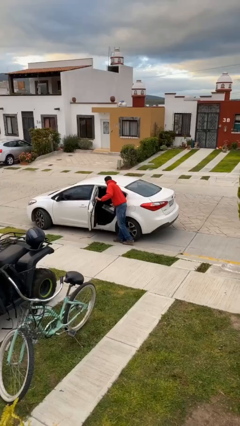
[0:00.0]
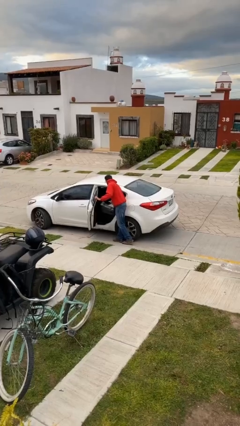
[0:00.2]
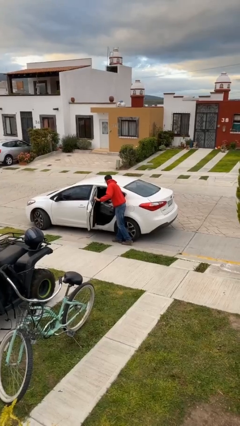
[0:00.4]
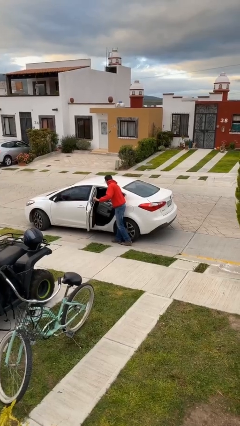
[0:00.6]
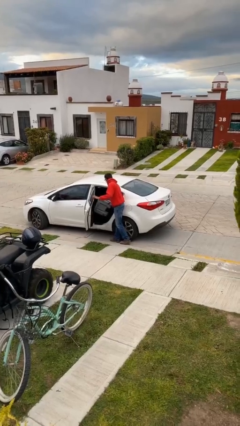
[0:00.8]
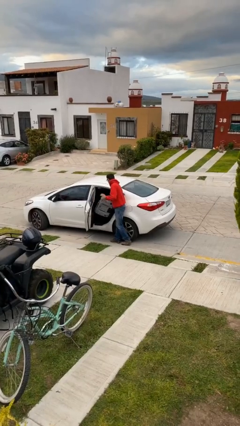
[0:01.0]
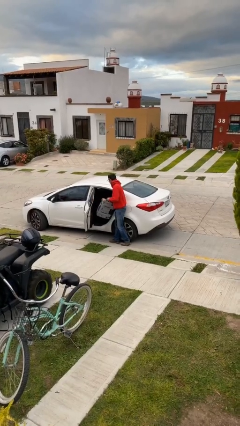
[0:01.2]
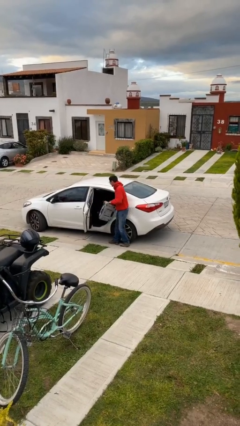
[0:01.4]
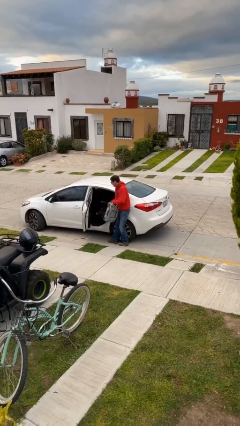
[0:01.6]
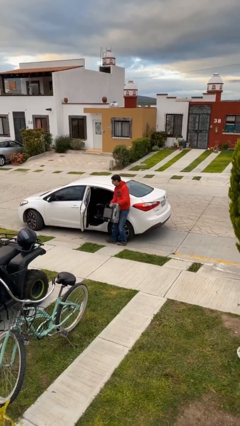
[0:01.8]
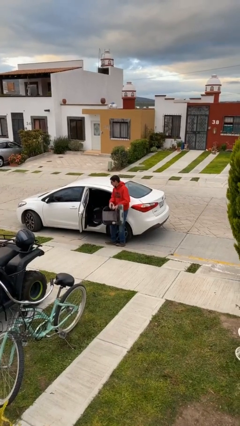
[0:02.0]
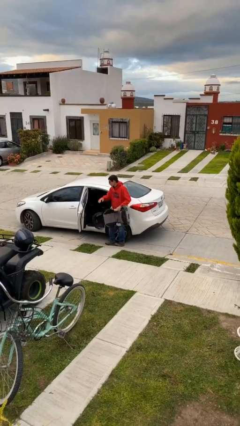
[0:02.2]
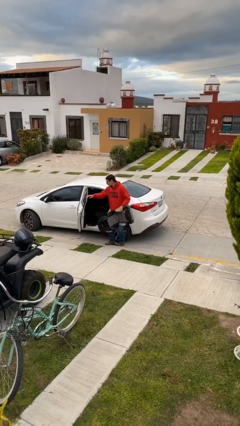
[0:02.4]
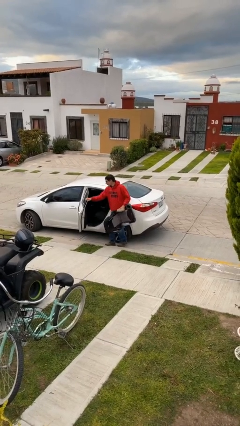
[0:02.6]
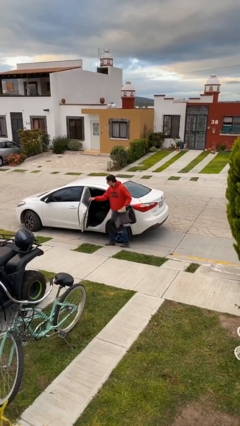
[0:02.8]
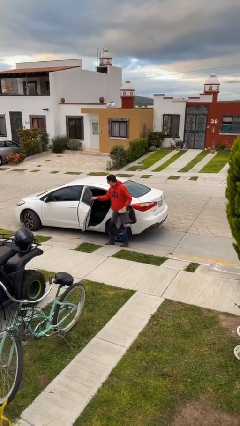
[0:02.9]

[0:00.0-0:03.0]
person unloads car

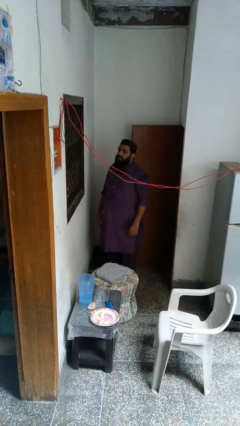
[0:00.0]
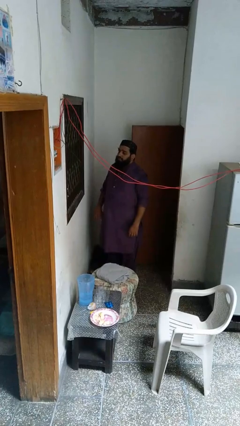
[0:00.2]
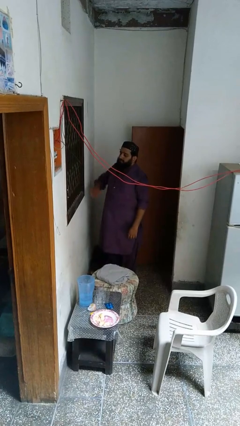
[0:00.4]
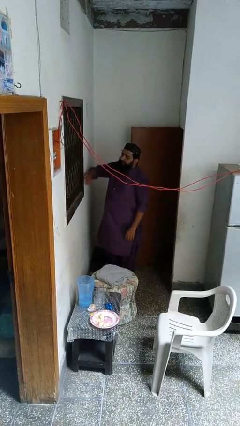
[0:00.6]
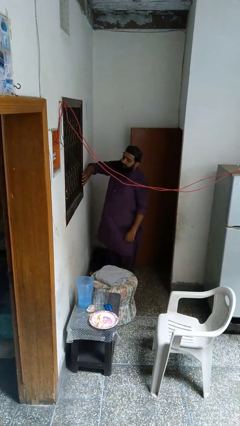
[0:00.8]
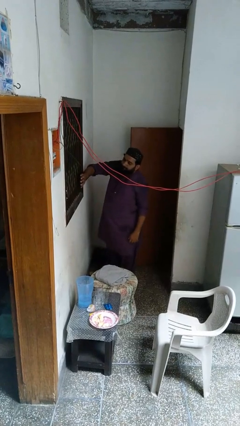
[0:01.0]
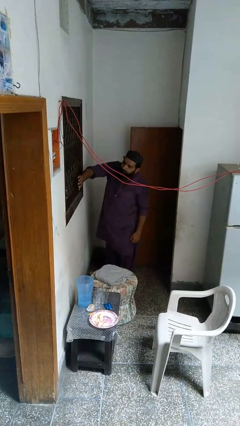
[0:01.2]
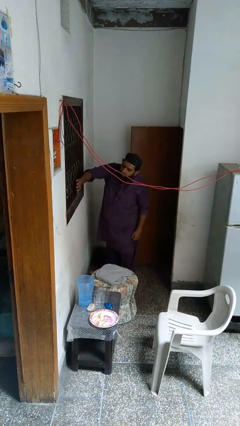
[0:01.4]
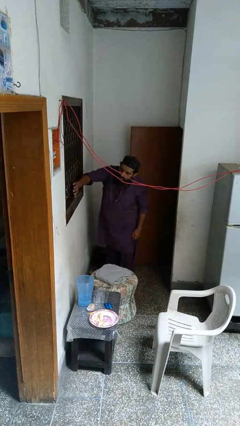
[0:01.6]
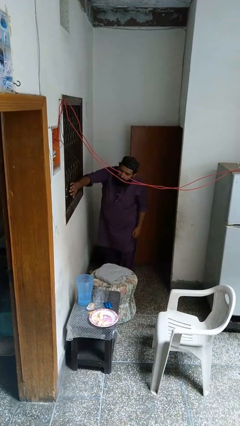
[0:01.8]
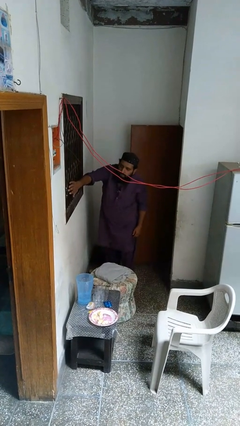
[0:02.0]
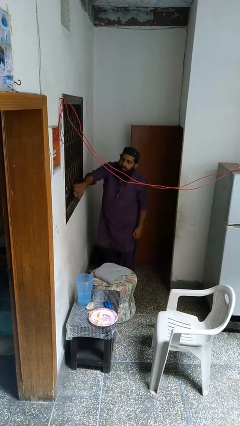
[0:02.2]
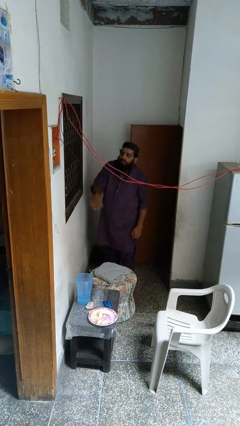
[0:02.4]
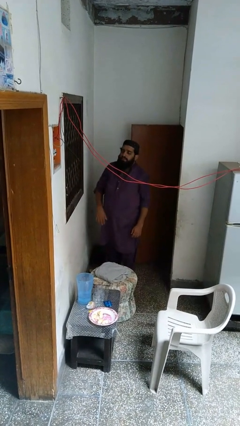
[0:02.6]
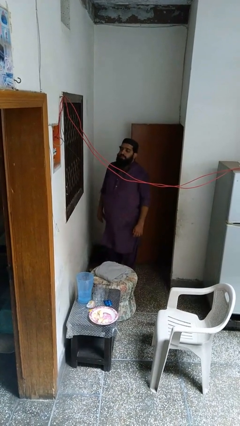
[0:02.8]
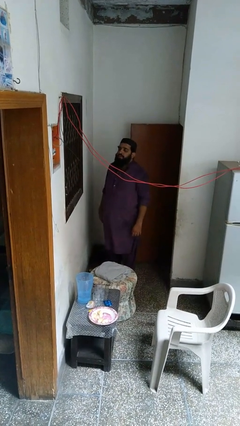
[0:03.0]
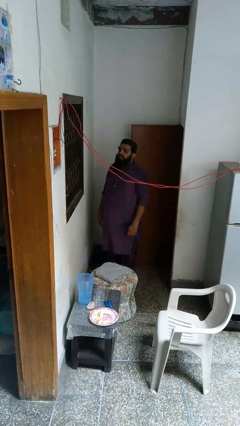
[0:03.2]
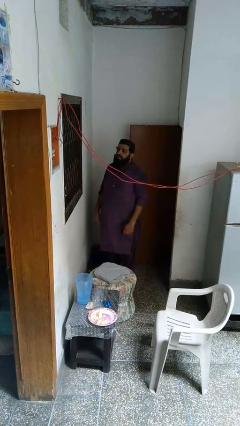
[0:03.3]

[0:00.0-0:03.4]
person opens home window

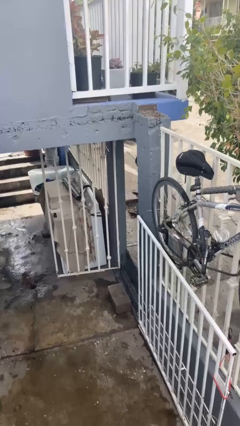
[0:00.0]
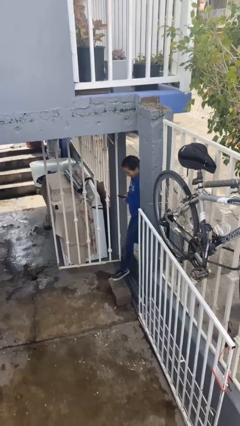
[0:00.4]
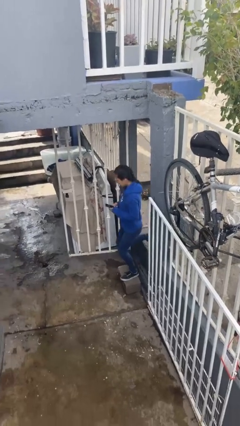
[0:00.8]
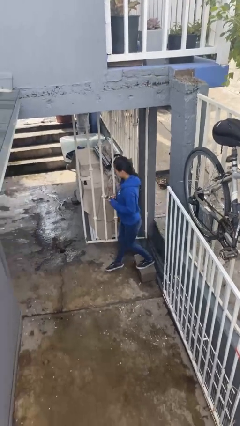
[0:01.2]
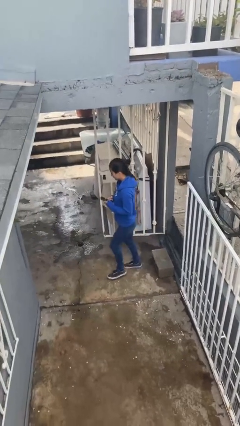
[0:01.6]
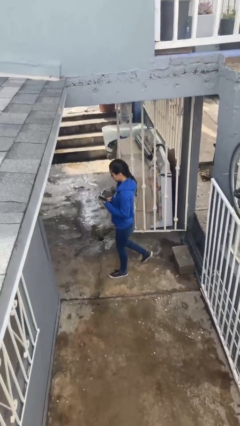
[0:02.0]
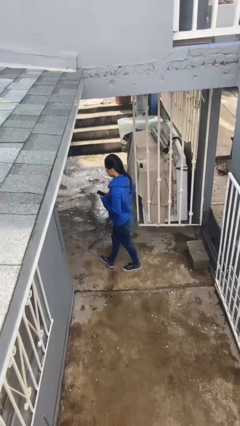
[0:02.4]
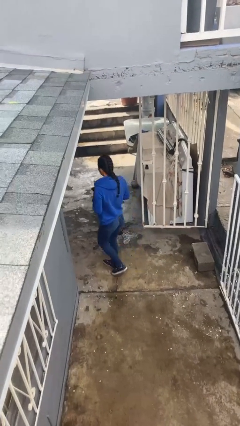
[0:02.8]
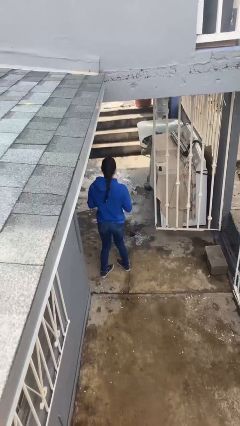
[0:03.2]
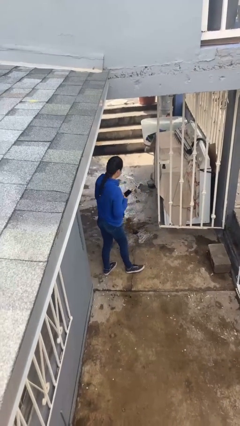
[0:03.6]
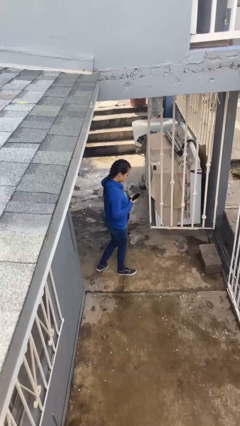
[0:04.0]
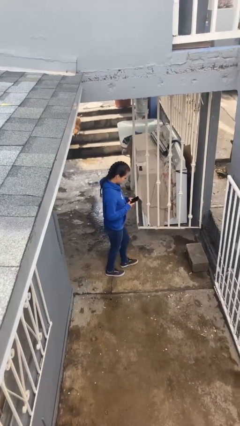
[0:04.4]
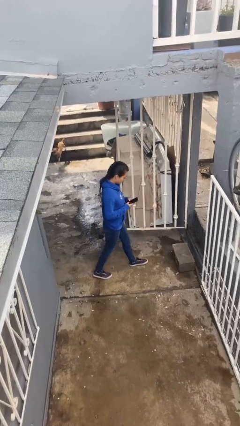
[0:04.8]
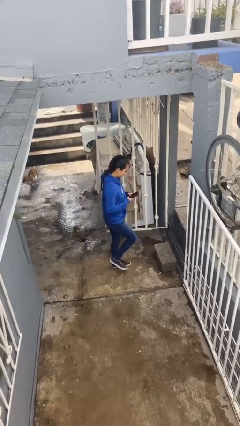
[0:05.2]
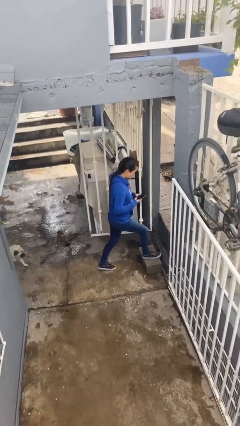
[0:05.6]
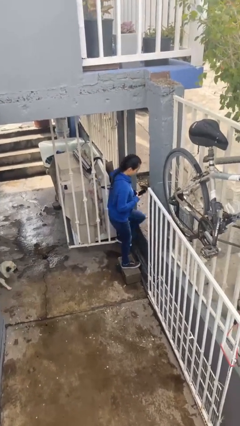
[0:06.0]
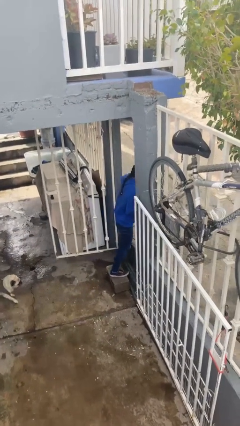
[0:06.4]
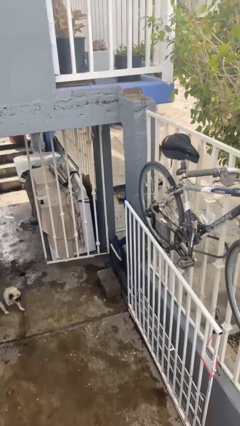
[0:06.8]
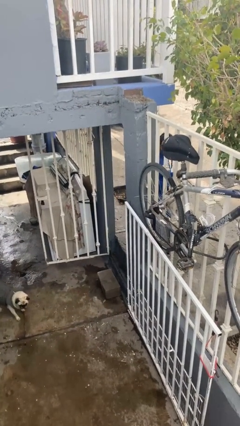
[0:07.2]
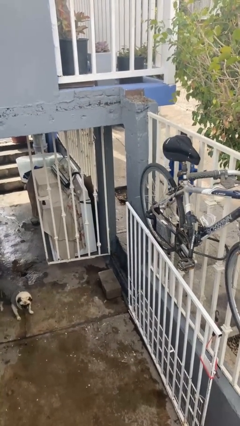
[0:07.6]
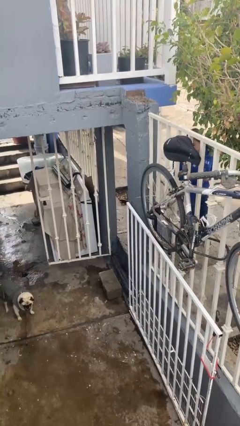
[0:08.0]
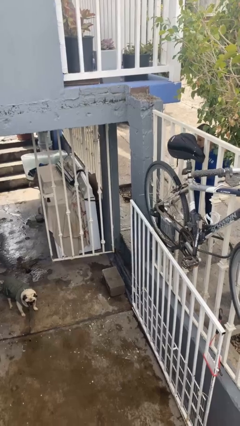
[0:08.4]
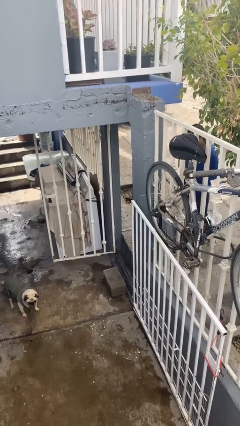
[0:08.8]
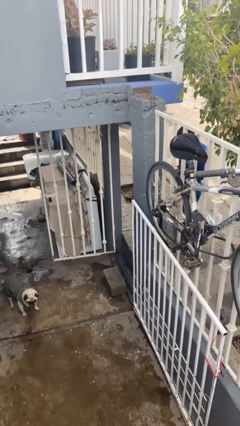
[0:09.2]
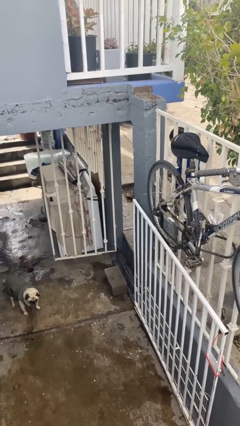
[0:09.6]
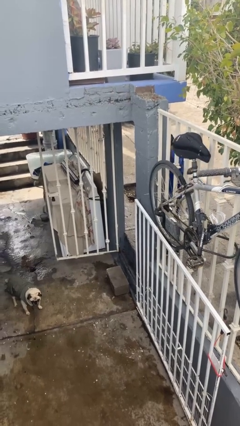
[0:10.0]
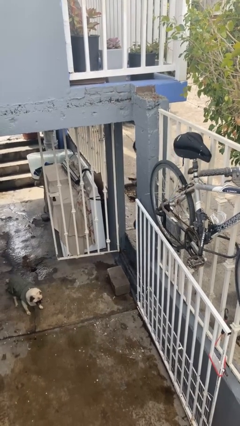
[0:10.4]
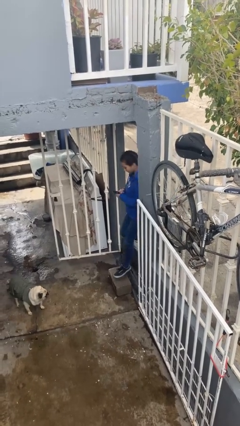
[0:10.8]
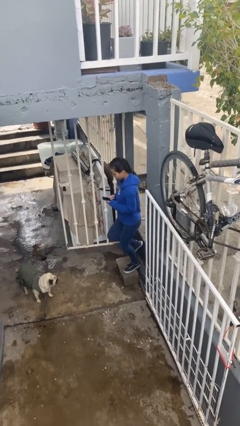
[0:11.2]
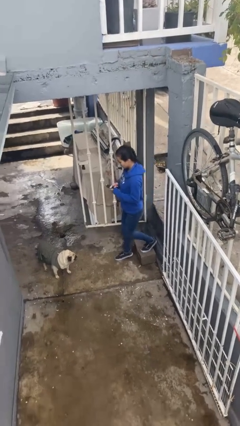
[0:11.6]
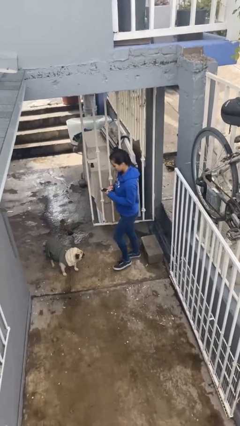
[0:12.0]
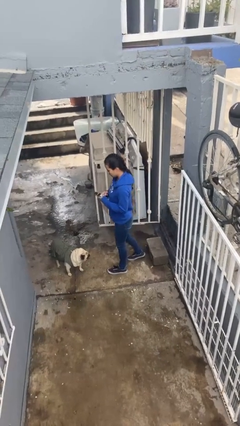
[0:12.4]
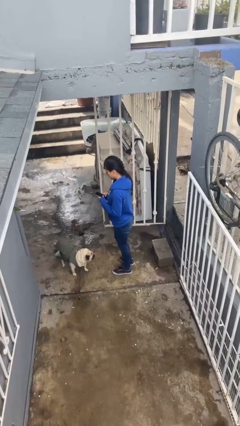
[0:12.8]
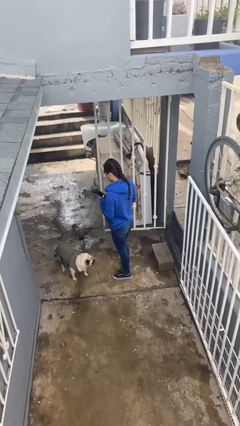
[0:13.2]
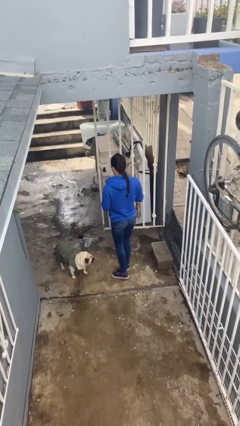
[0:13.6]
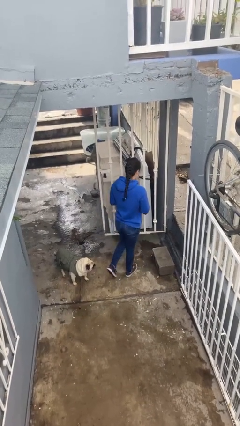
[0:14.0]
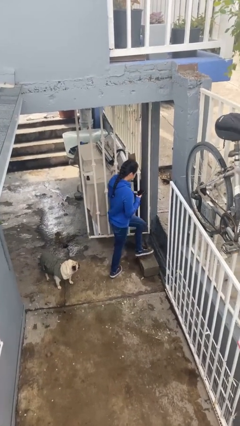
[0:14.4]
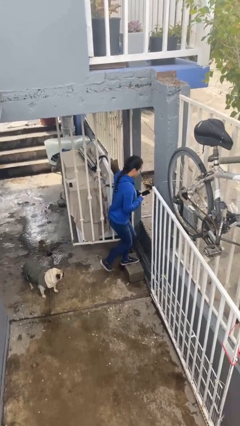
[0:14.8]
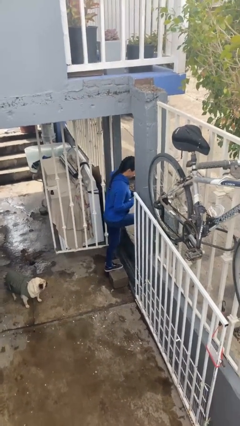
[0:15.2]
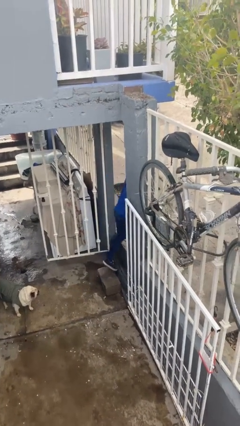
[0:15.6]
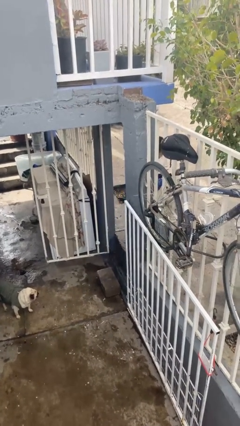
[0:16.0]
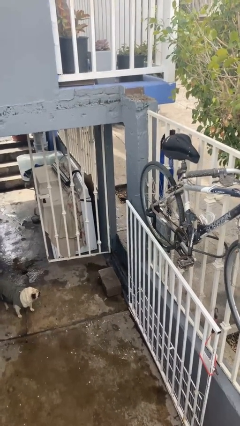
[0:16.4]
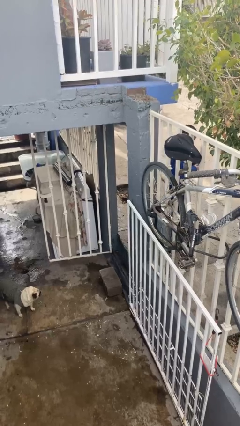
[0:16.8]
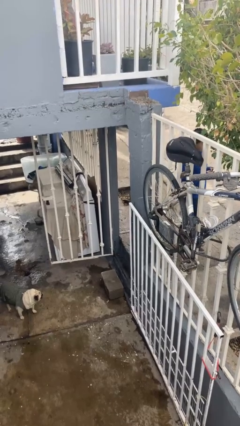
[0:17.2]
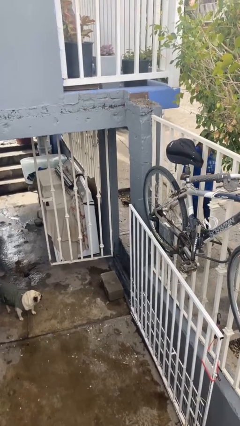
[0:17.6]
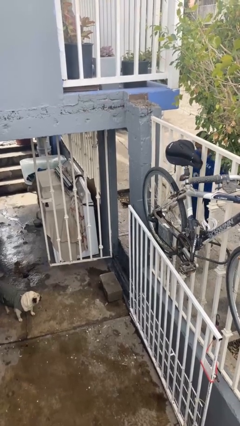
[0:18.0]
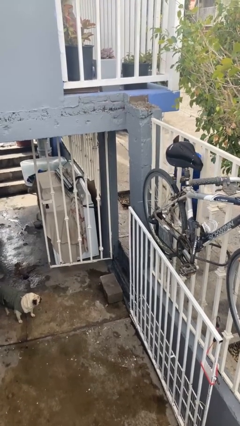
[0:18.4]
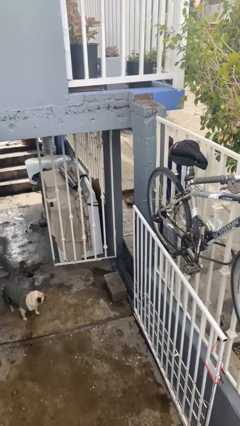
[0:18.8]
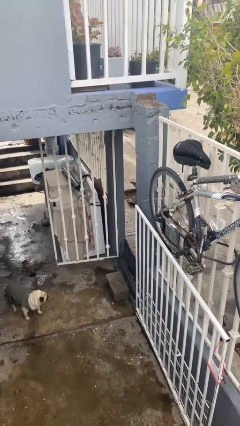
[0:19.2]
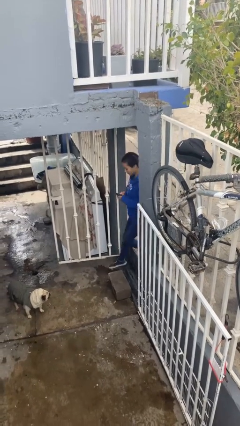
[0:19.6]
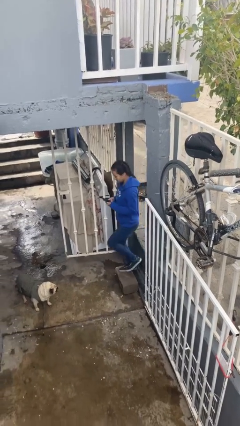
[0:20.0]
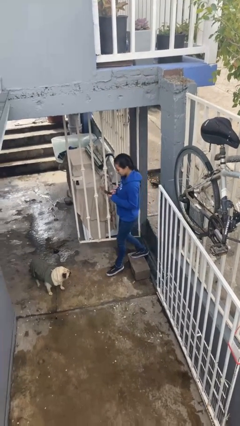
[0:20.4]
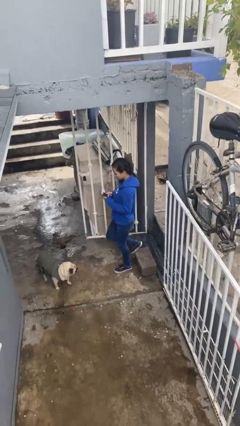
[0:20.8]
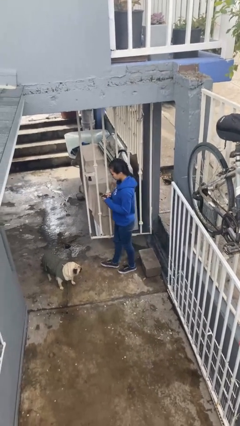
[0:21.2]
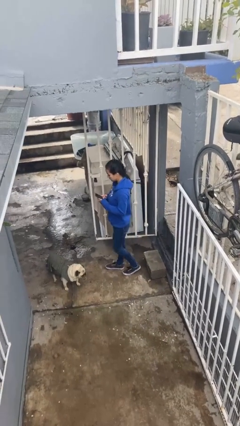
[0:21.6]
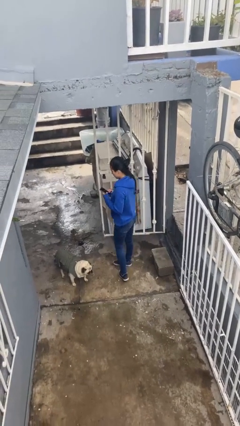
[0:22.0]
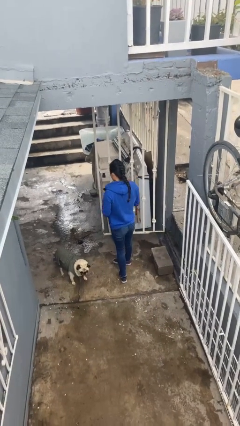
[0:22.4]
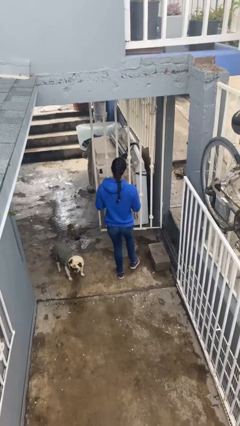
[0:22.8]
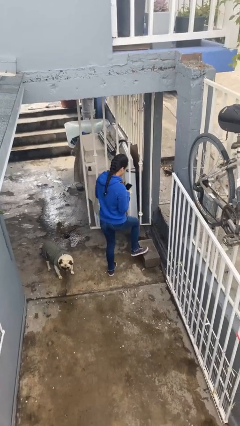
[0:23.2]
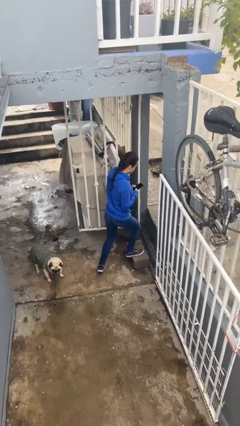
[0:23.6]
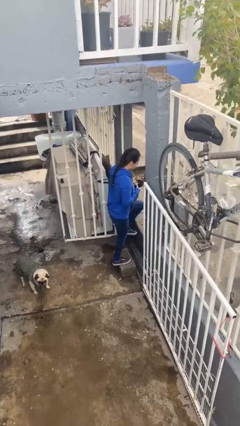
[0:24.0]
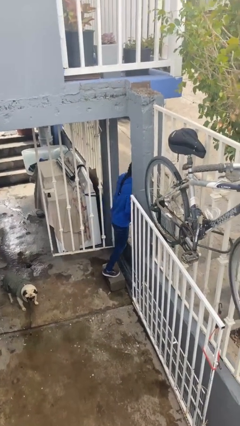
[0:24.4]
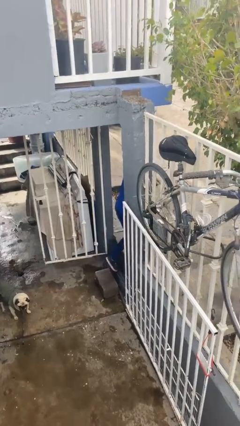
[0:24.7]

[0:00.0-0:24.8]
person texts on phone
